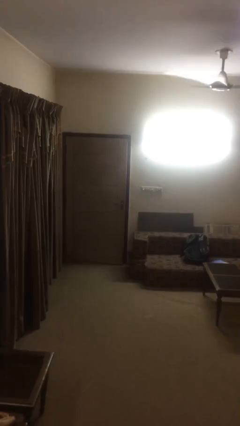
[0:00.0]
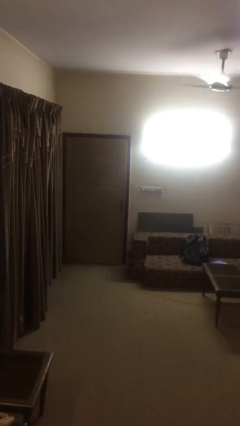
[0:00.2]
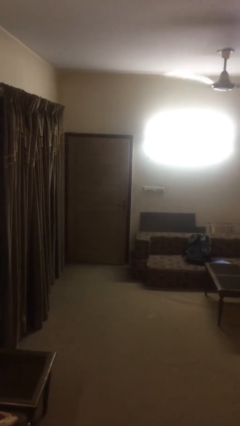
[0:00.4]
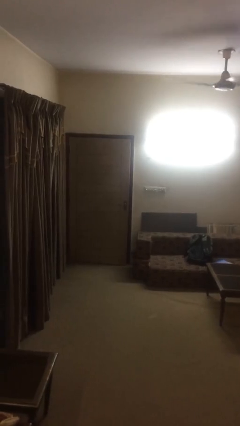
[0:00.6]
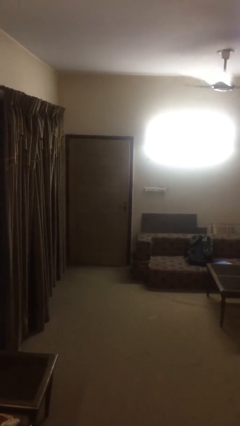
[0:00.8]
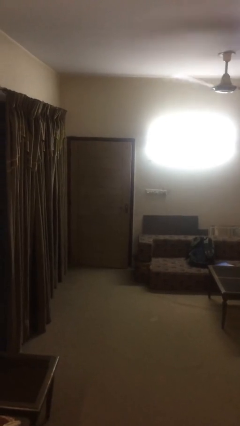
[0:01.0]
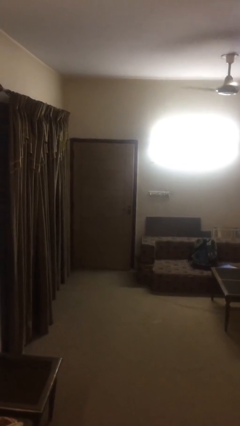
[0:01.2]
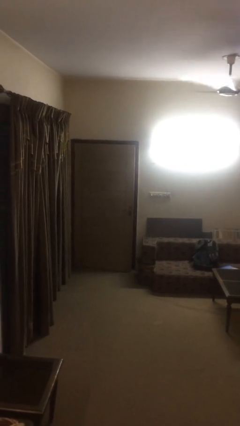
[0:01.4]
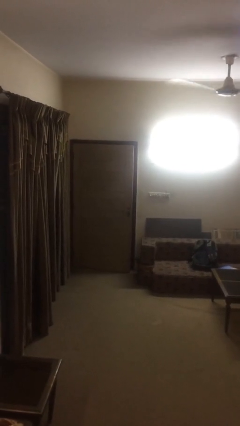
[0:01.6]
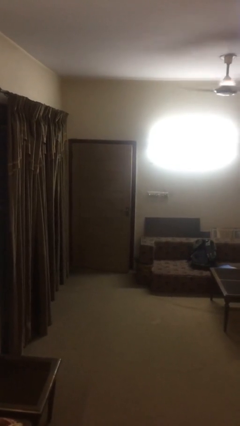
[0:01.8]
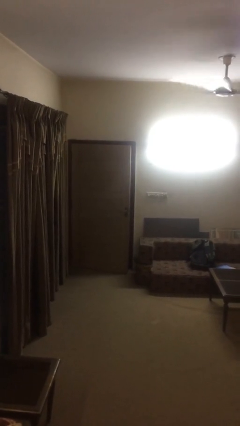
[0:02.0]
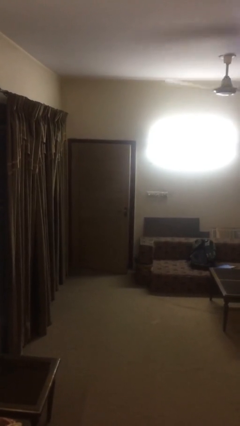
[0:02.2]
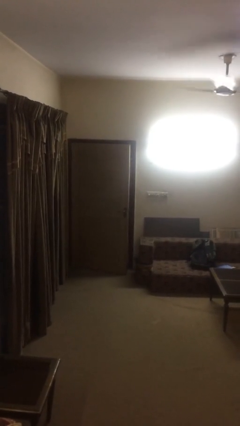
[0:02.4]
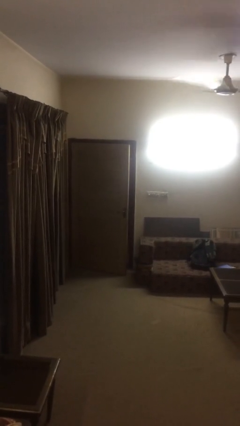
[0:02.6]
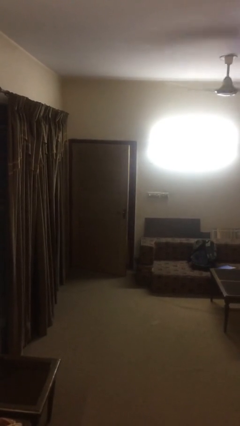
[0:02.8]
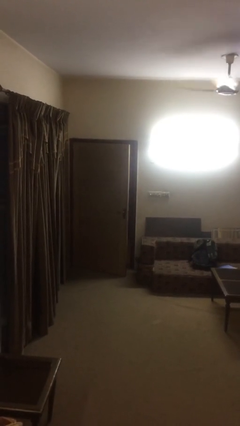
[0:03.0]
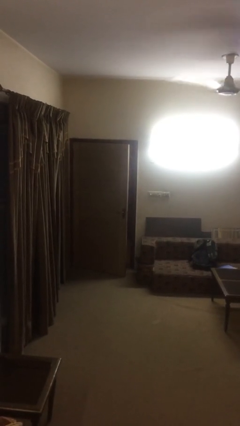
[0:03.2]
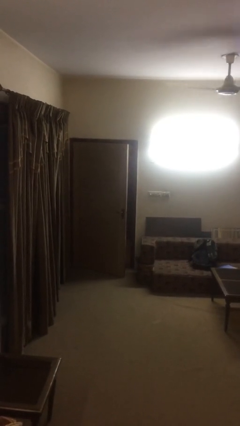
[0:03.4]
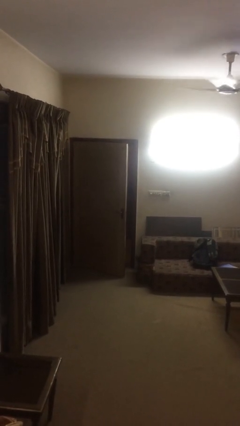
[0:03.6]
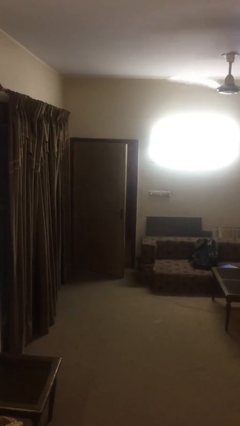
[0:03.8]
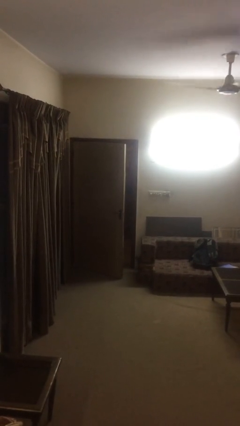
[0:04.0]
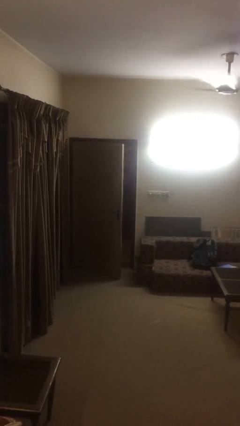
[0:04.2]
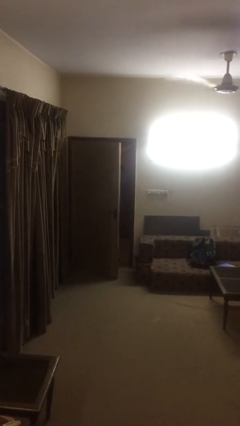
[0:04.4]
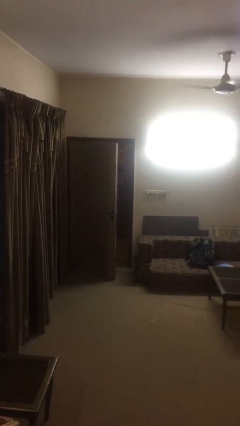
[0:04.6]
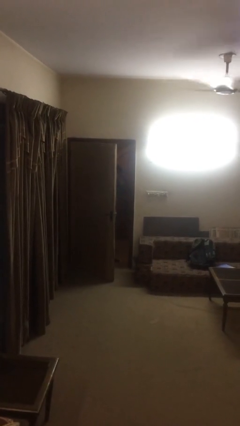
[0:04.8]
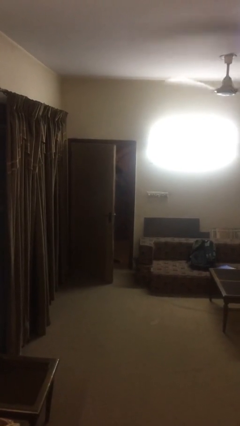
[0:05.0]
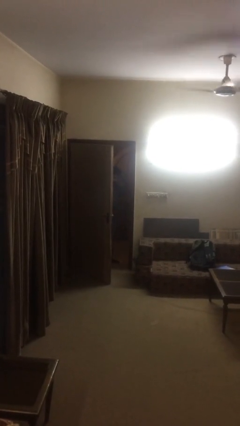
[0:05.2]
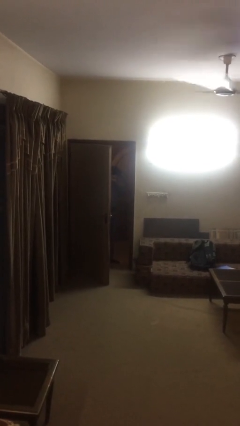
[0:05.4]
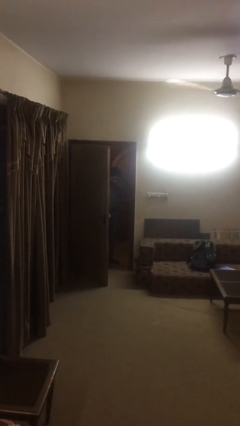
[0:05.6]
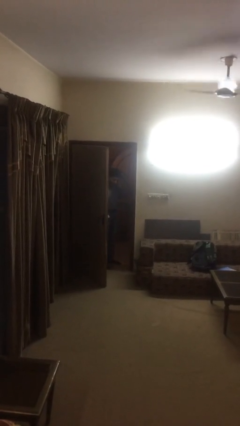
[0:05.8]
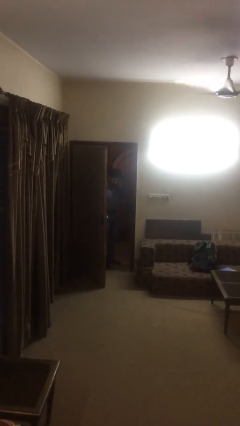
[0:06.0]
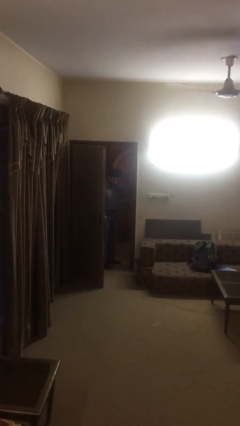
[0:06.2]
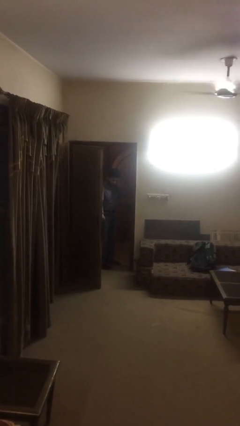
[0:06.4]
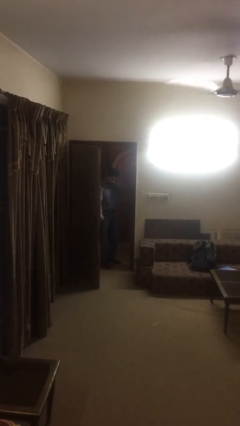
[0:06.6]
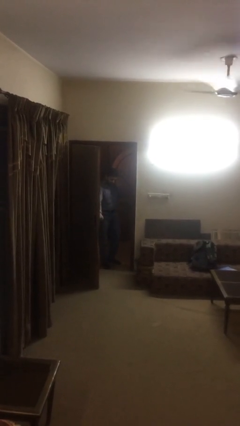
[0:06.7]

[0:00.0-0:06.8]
person opens facility door

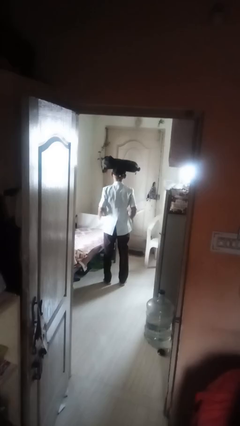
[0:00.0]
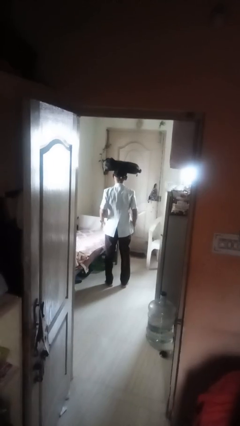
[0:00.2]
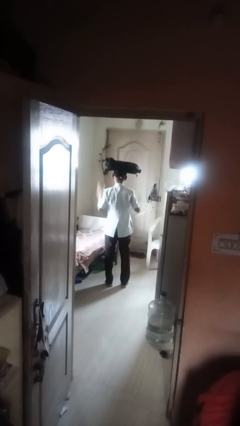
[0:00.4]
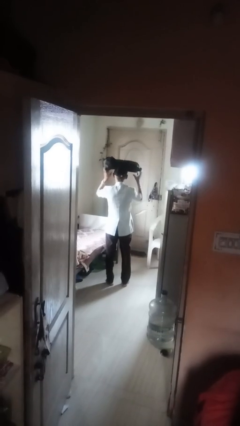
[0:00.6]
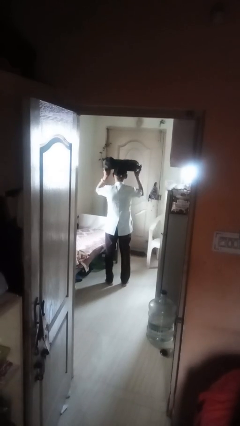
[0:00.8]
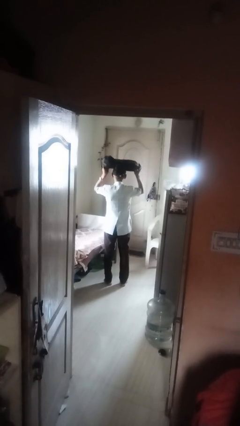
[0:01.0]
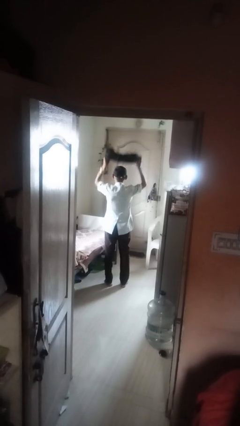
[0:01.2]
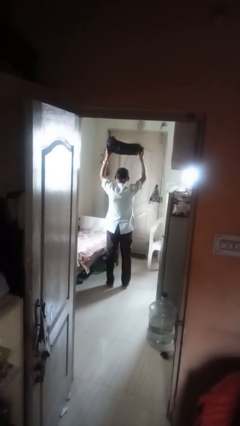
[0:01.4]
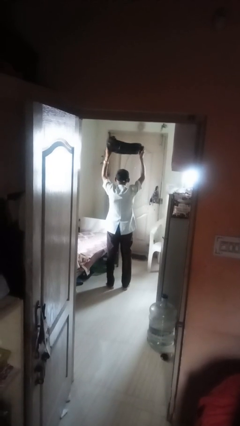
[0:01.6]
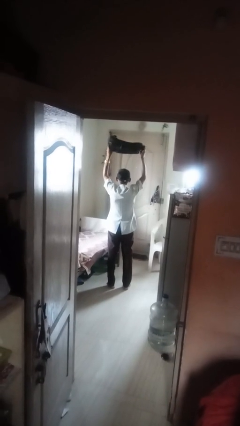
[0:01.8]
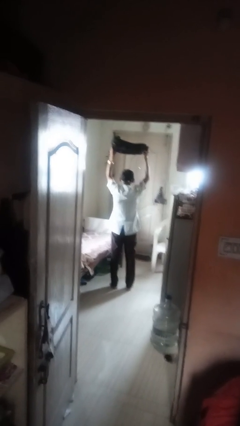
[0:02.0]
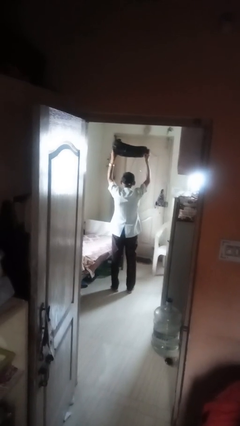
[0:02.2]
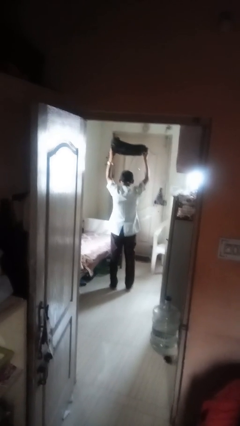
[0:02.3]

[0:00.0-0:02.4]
person holds object above head

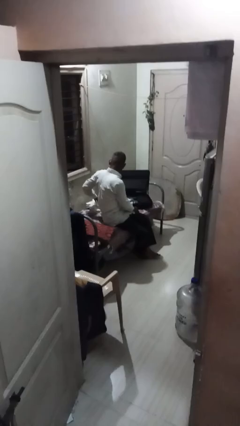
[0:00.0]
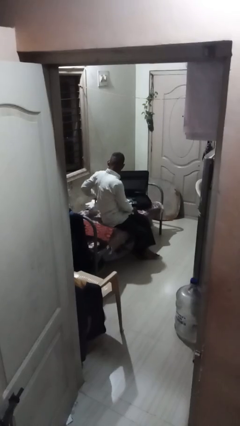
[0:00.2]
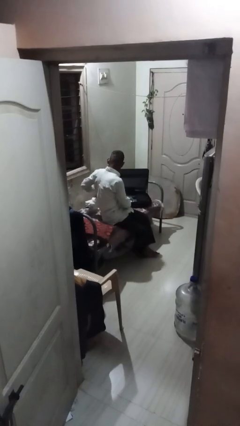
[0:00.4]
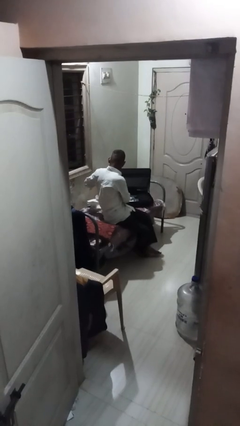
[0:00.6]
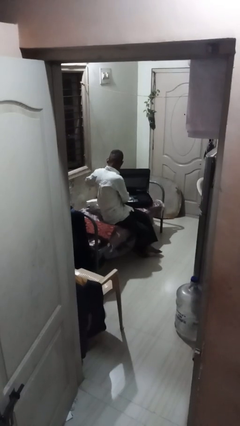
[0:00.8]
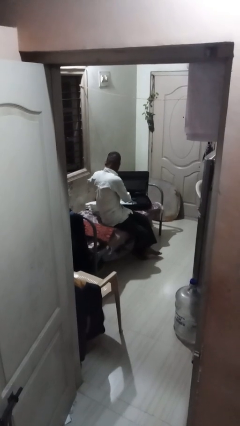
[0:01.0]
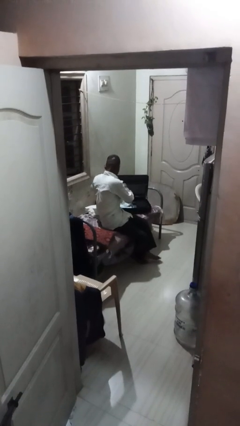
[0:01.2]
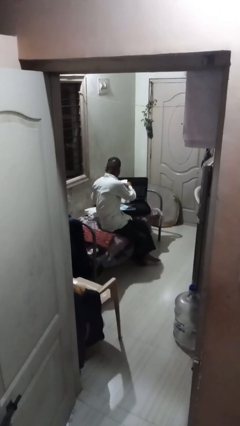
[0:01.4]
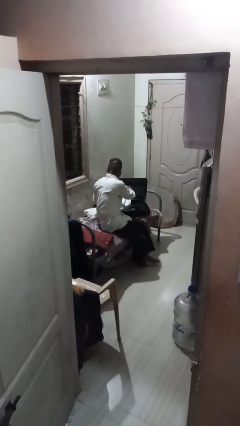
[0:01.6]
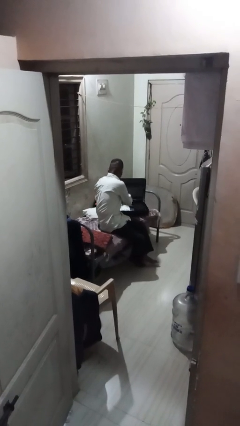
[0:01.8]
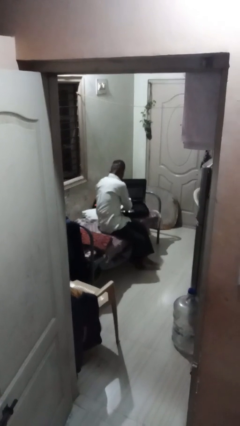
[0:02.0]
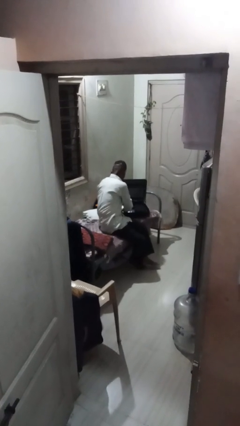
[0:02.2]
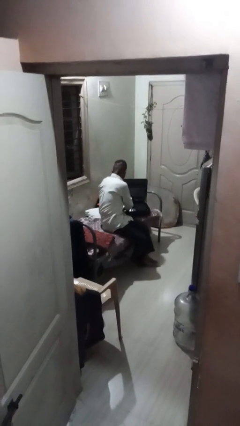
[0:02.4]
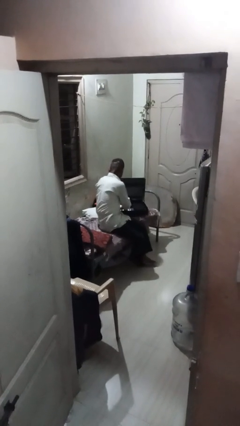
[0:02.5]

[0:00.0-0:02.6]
person loads clothes into suitcase

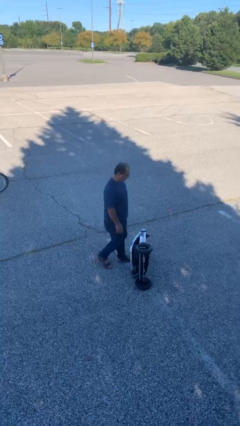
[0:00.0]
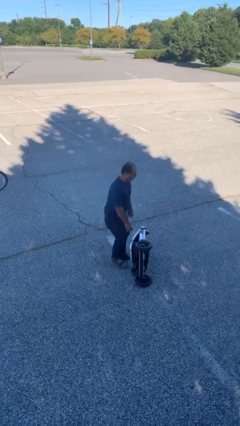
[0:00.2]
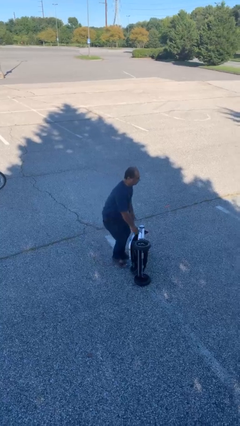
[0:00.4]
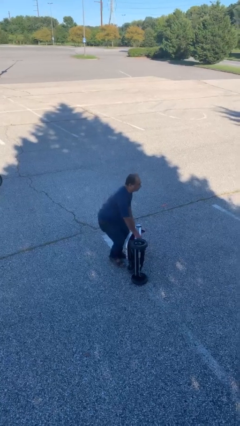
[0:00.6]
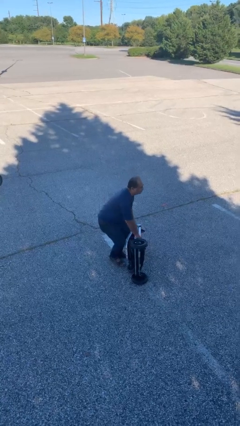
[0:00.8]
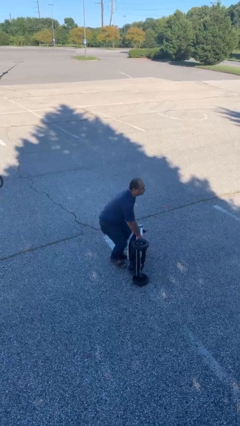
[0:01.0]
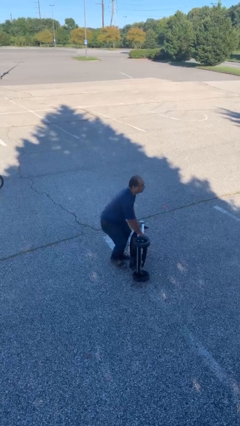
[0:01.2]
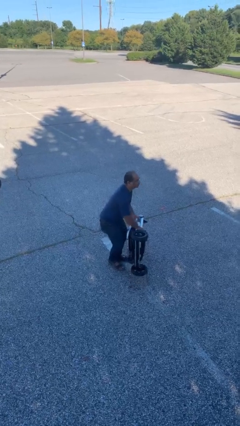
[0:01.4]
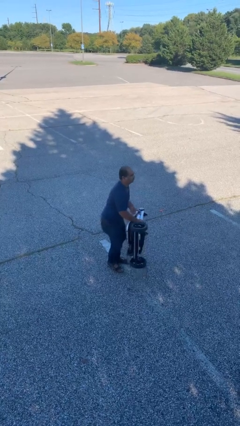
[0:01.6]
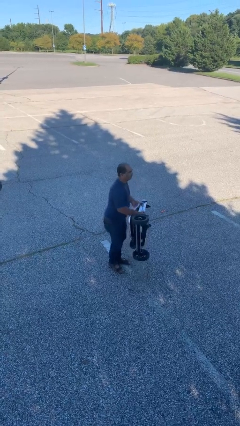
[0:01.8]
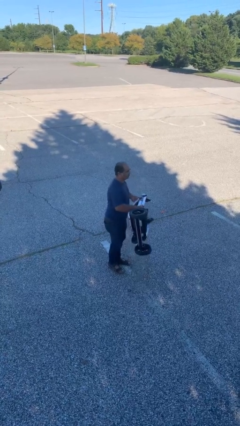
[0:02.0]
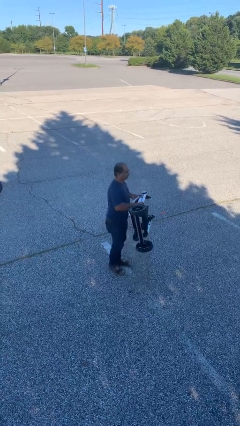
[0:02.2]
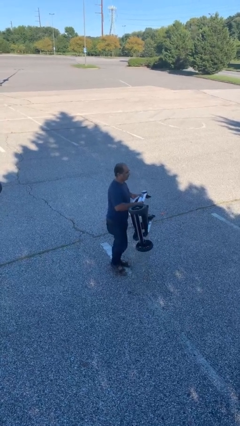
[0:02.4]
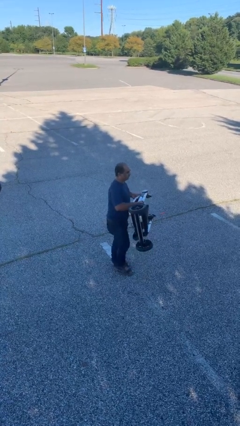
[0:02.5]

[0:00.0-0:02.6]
person picks up object from floor

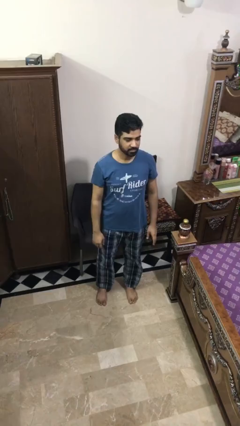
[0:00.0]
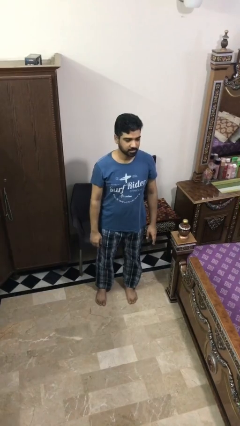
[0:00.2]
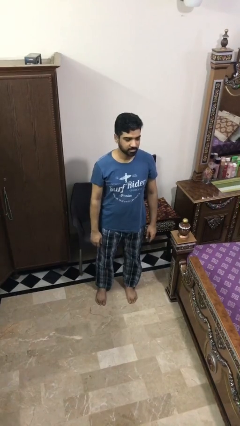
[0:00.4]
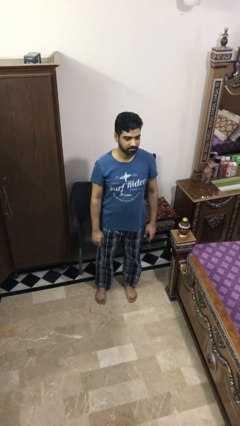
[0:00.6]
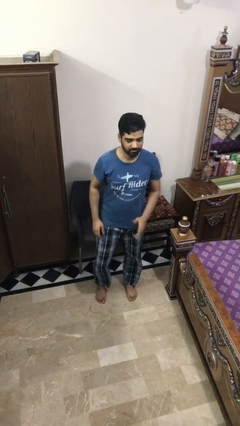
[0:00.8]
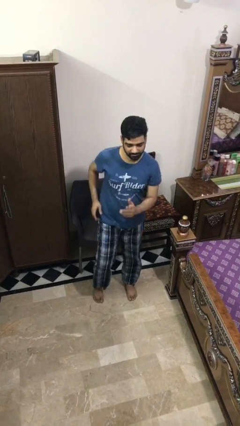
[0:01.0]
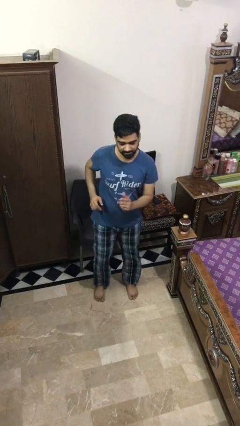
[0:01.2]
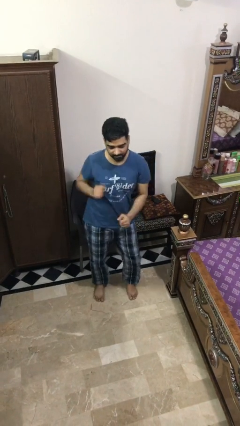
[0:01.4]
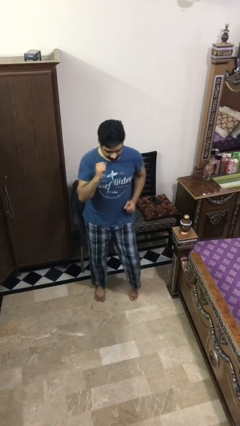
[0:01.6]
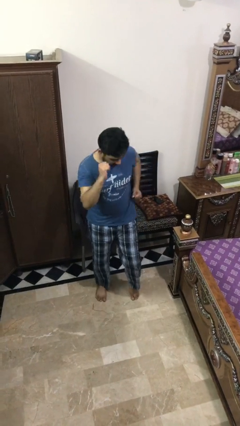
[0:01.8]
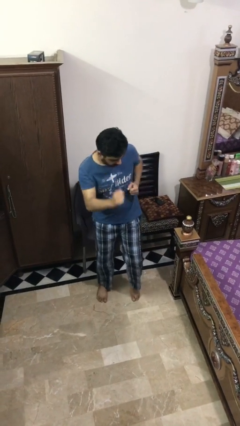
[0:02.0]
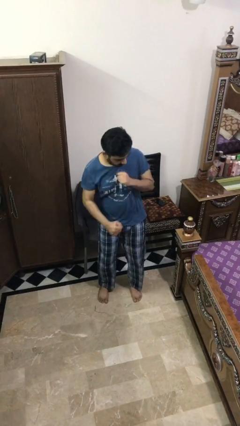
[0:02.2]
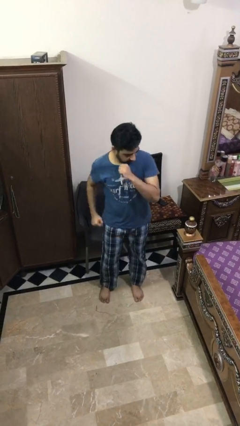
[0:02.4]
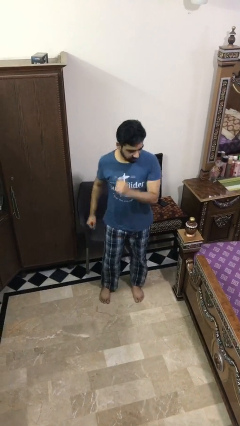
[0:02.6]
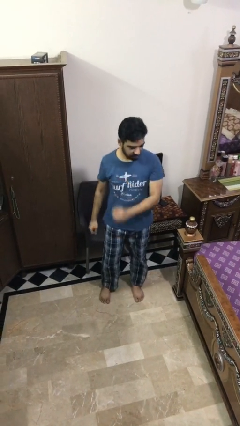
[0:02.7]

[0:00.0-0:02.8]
person dances in place

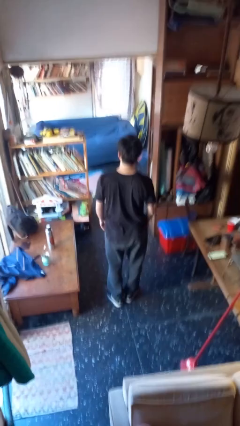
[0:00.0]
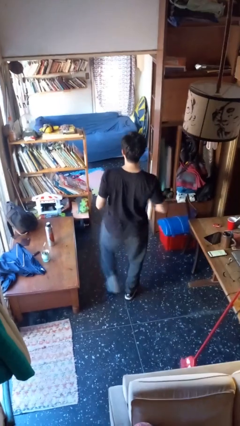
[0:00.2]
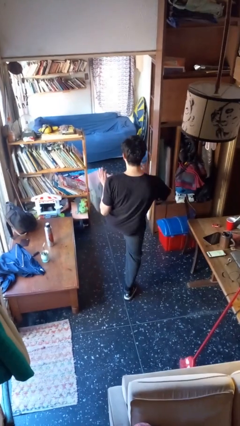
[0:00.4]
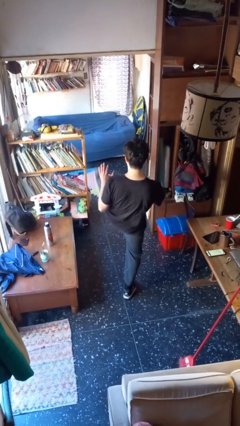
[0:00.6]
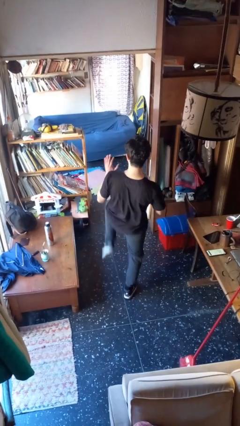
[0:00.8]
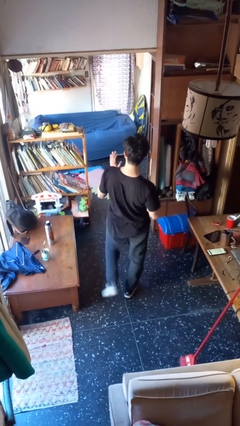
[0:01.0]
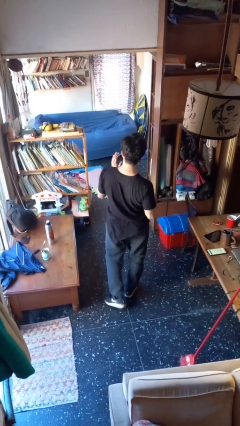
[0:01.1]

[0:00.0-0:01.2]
person karate kicks
